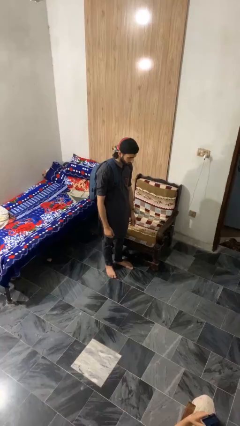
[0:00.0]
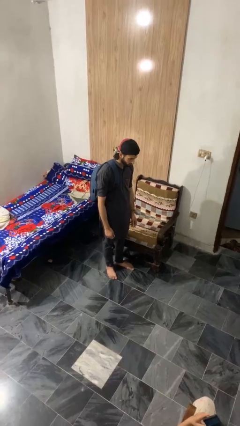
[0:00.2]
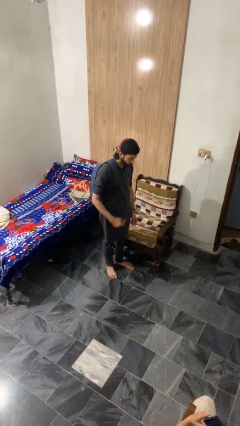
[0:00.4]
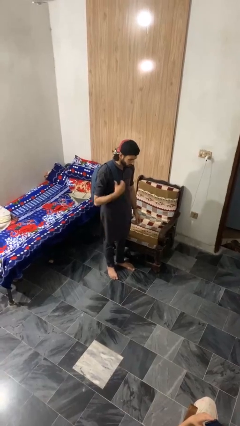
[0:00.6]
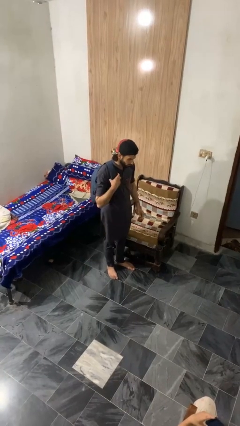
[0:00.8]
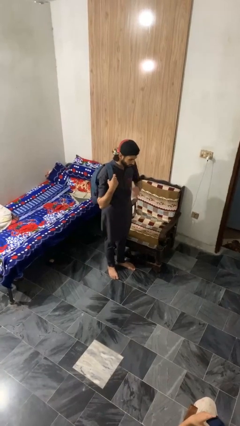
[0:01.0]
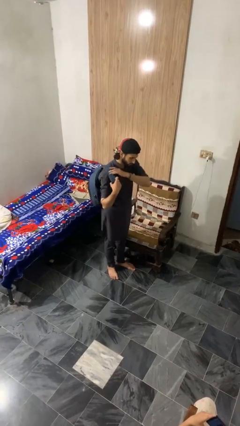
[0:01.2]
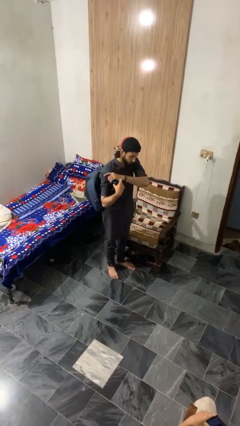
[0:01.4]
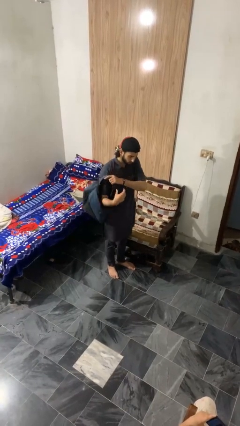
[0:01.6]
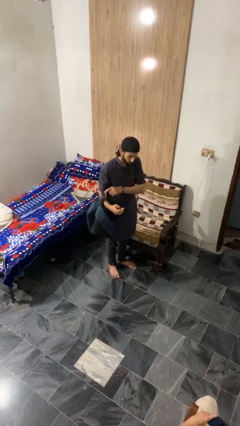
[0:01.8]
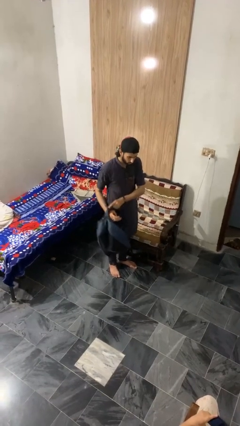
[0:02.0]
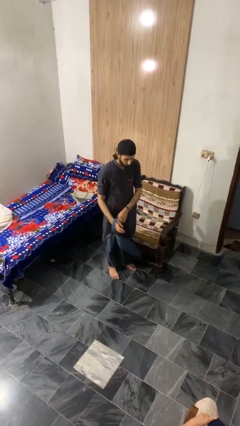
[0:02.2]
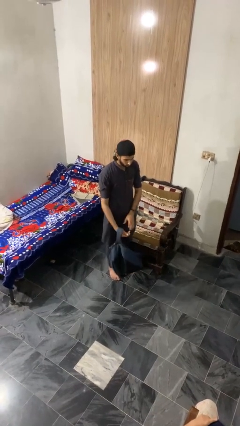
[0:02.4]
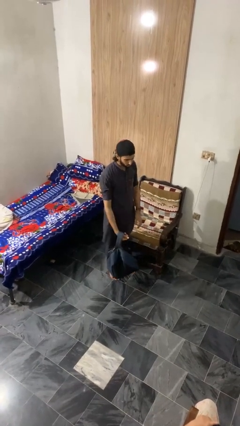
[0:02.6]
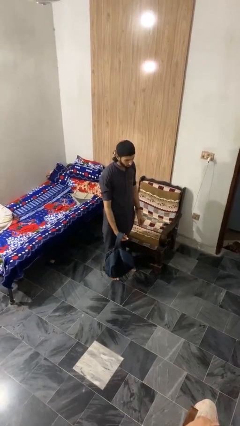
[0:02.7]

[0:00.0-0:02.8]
person takes off backpack

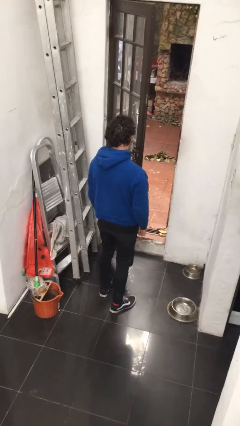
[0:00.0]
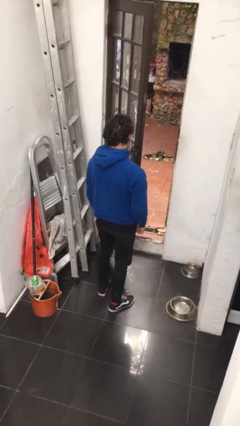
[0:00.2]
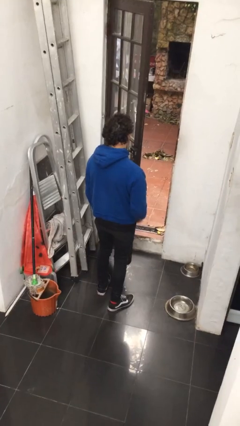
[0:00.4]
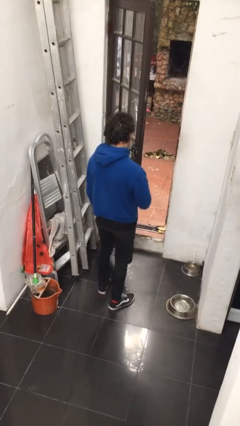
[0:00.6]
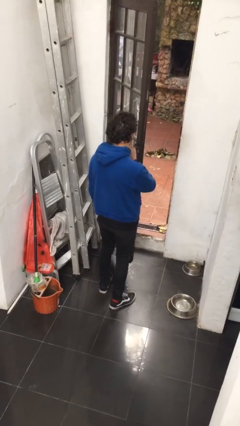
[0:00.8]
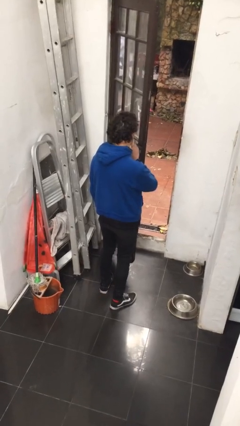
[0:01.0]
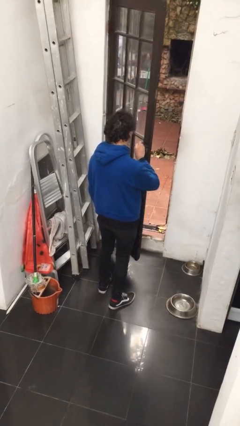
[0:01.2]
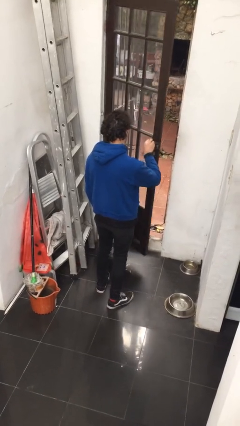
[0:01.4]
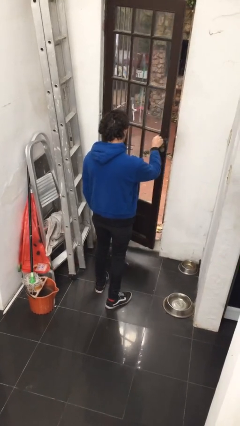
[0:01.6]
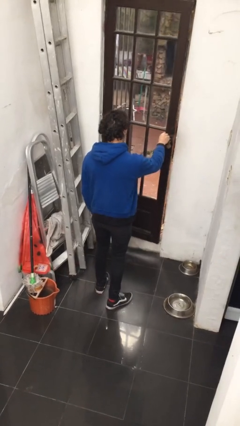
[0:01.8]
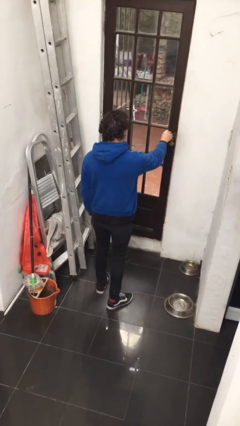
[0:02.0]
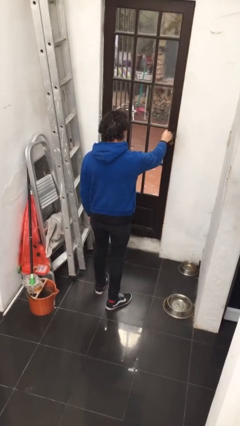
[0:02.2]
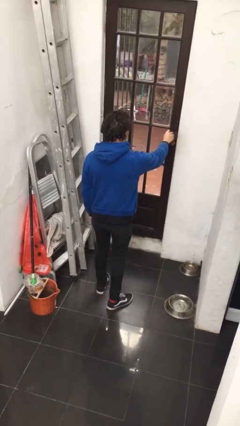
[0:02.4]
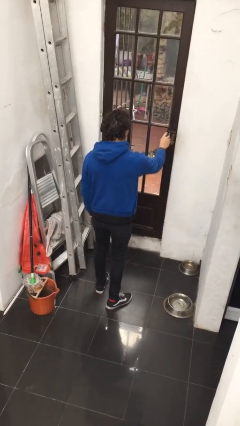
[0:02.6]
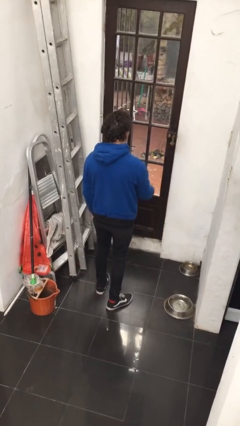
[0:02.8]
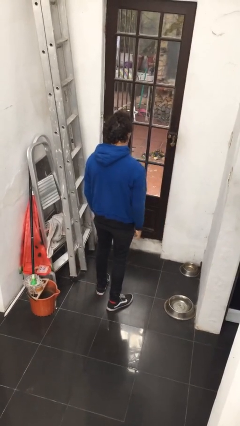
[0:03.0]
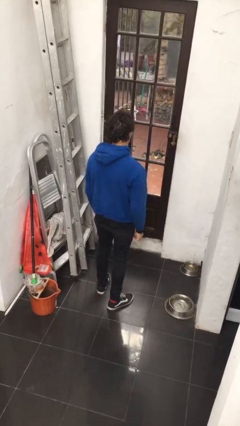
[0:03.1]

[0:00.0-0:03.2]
person closes facility door

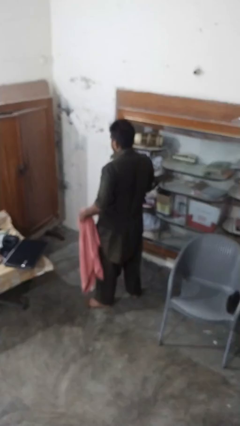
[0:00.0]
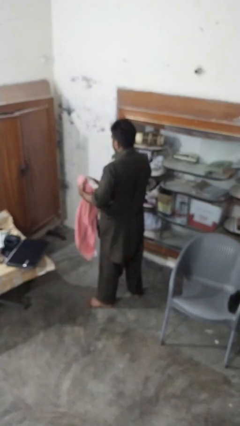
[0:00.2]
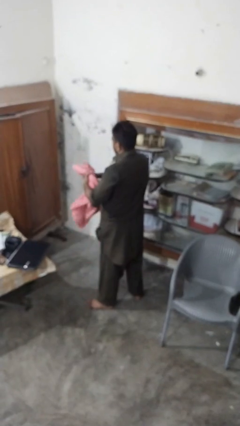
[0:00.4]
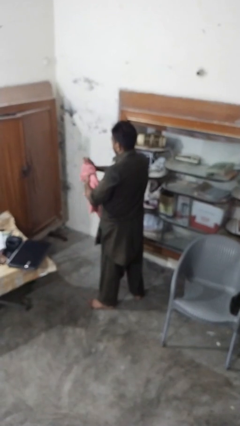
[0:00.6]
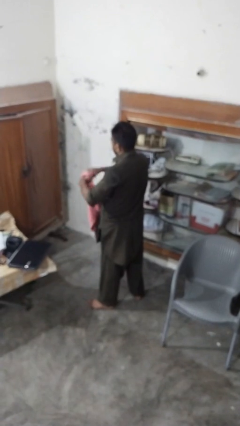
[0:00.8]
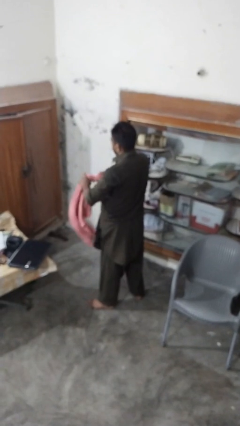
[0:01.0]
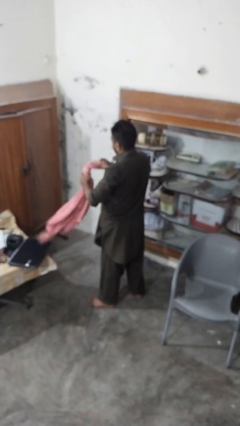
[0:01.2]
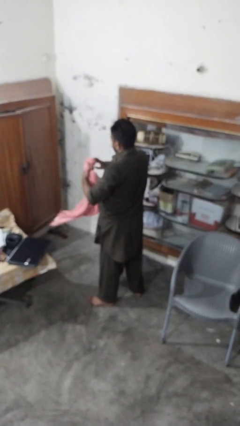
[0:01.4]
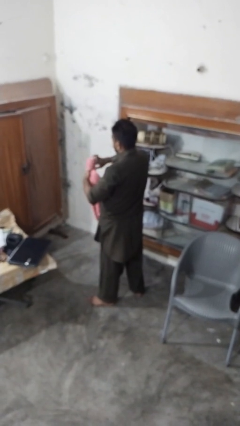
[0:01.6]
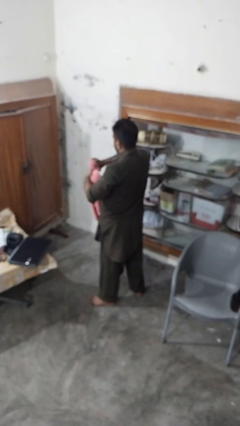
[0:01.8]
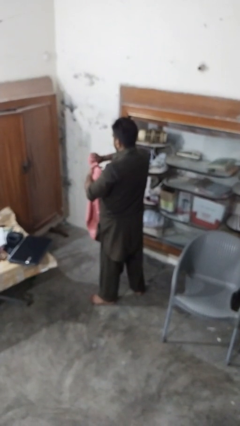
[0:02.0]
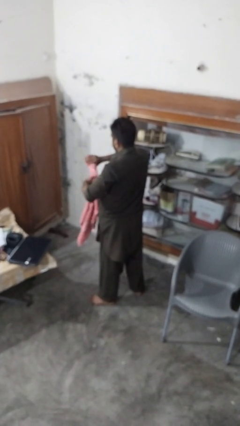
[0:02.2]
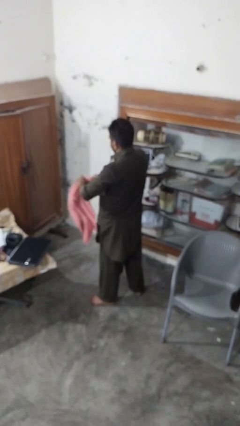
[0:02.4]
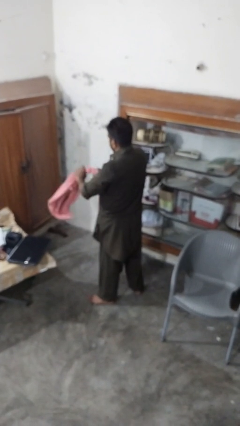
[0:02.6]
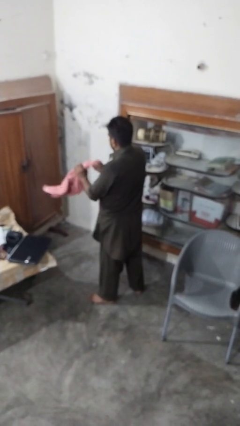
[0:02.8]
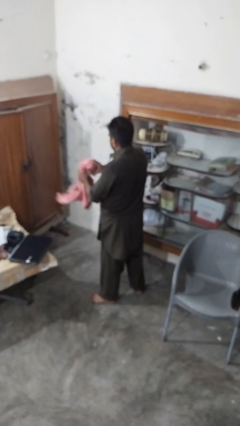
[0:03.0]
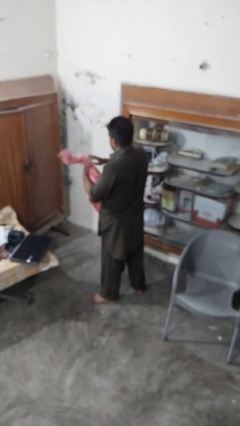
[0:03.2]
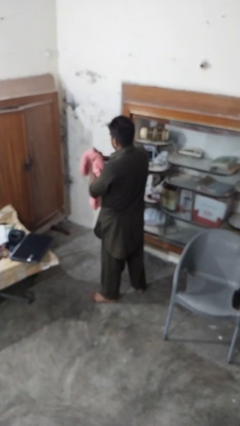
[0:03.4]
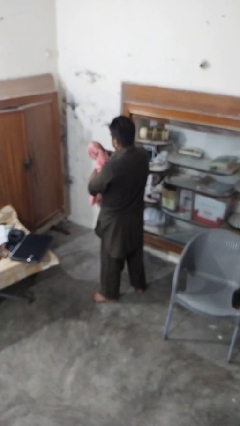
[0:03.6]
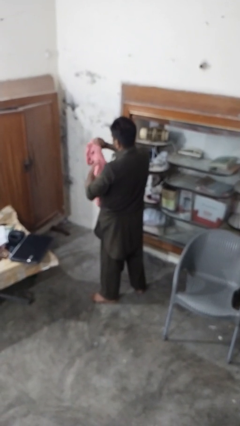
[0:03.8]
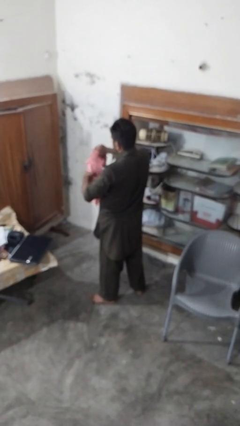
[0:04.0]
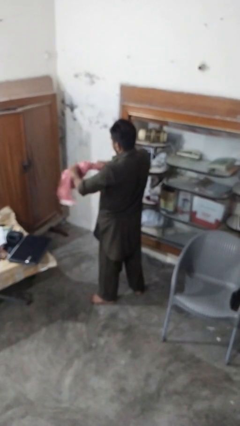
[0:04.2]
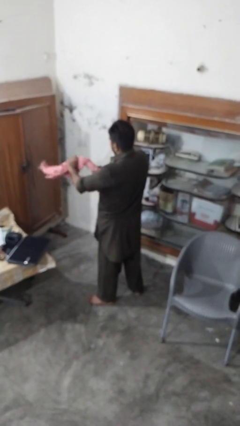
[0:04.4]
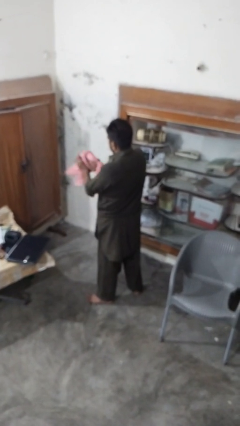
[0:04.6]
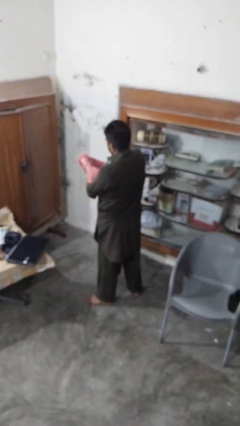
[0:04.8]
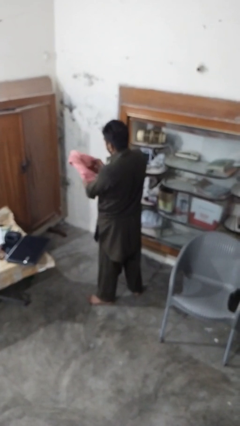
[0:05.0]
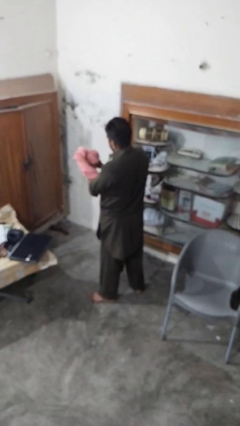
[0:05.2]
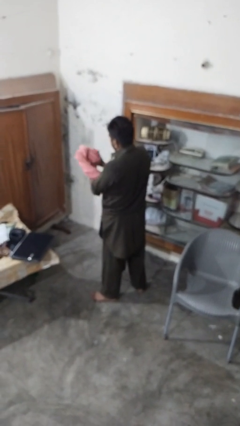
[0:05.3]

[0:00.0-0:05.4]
person squeezes object

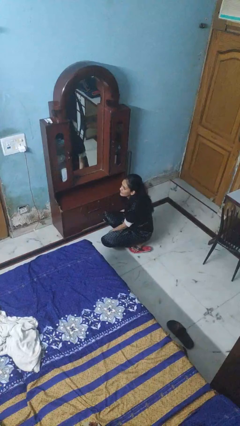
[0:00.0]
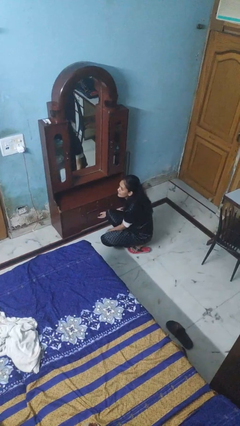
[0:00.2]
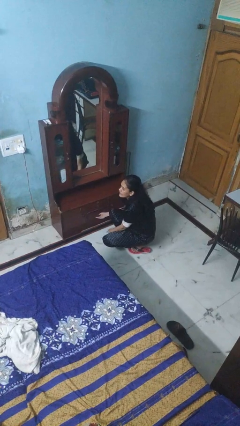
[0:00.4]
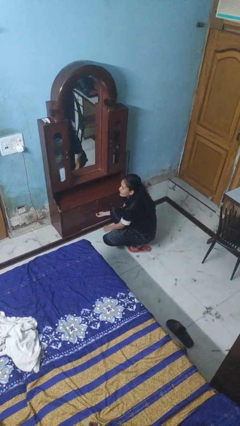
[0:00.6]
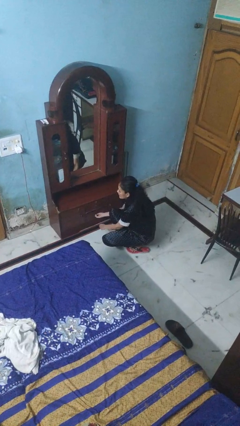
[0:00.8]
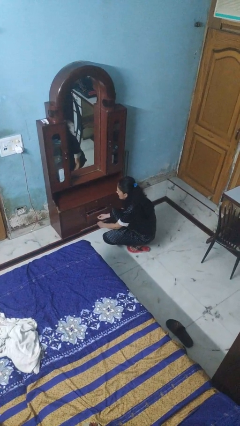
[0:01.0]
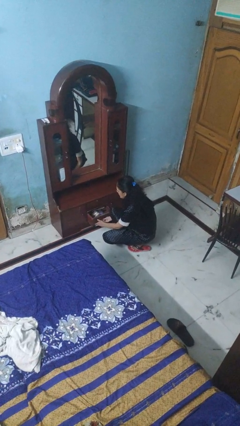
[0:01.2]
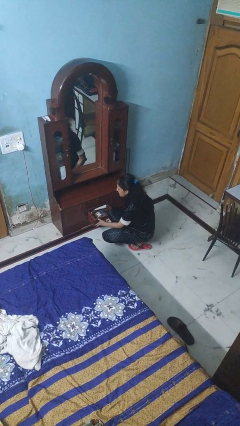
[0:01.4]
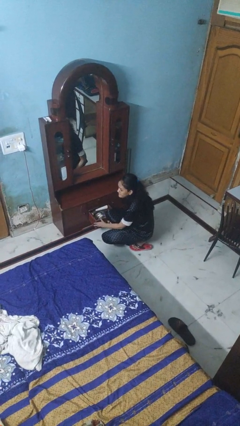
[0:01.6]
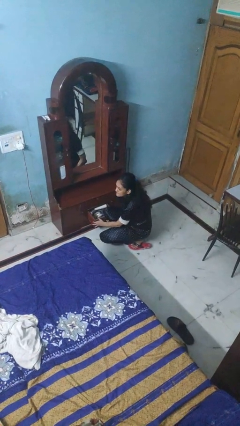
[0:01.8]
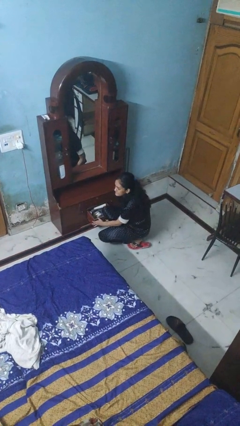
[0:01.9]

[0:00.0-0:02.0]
person opens dresser drawer

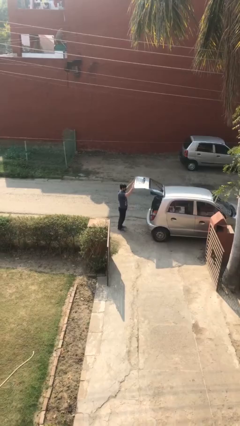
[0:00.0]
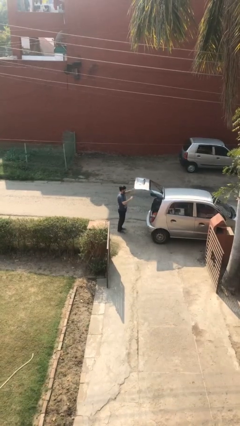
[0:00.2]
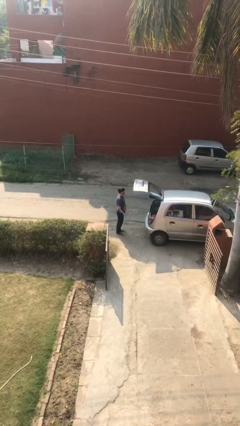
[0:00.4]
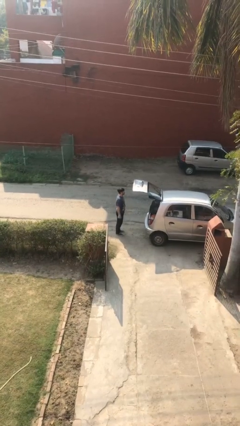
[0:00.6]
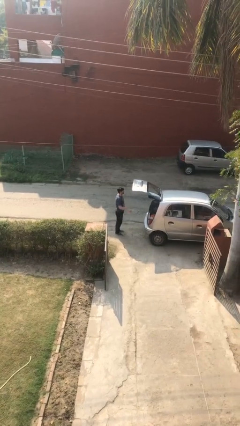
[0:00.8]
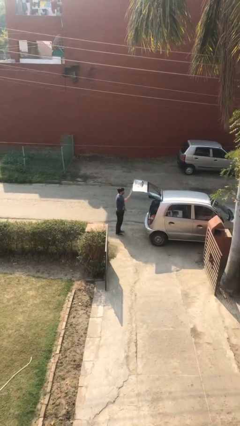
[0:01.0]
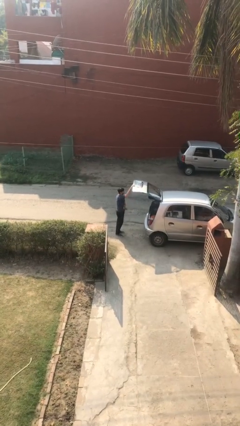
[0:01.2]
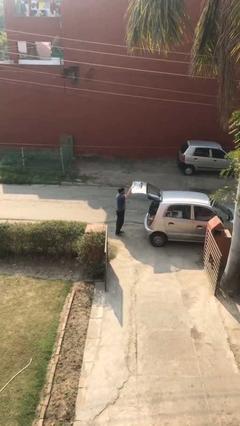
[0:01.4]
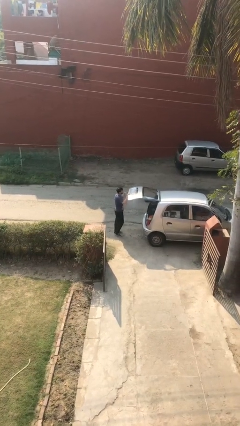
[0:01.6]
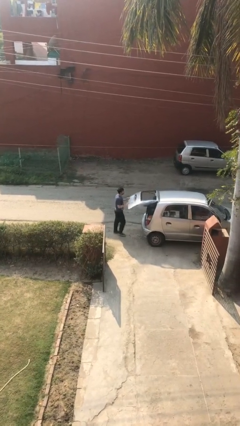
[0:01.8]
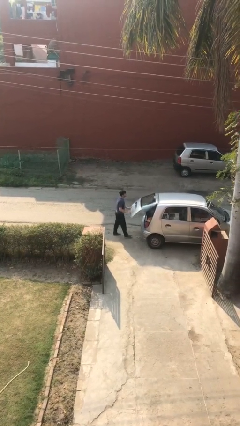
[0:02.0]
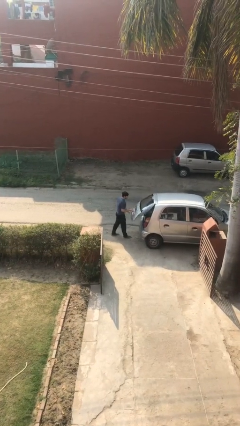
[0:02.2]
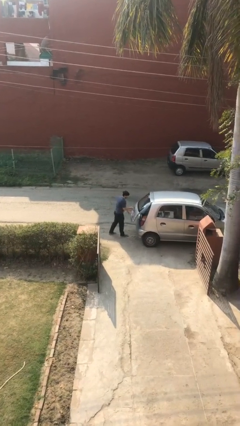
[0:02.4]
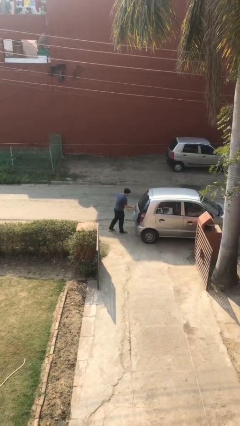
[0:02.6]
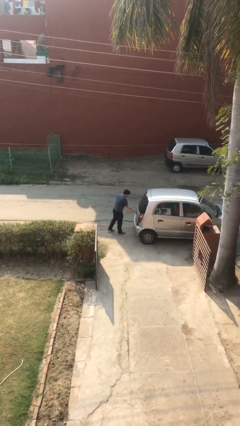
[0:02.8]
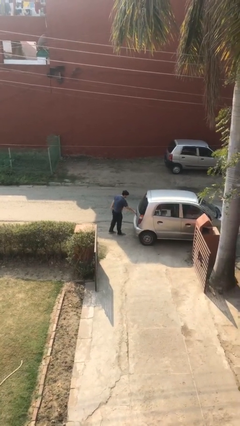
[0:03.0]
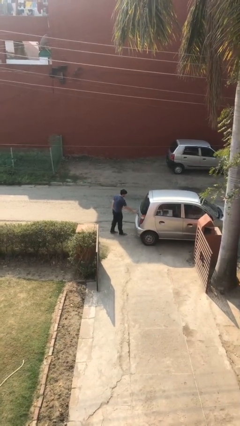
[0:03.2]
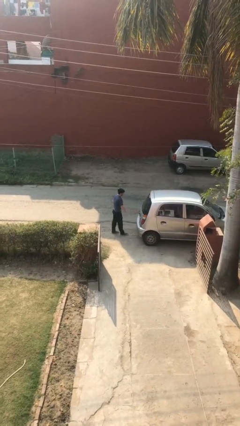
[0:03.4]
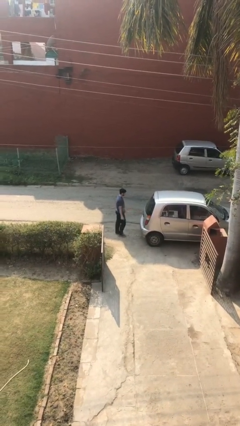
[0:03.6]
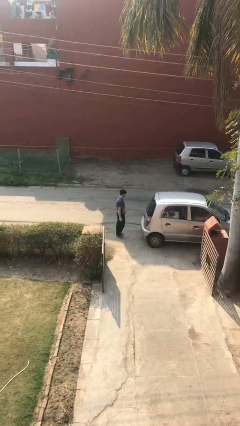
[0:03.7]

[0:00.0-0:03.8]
person closes car trunk

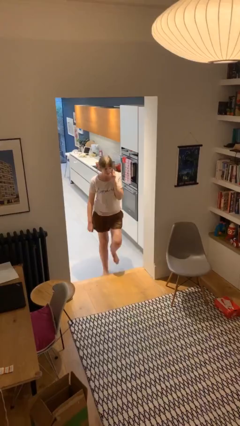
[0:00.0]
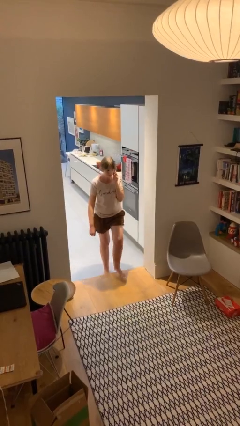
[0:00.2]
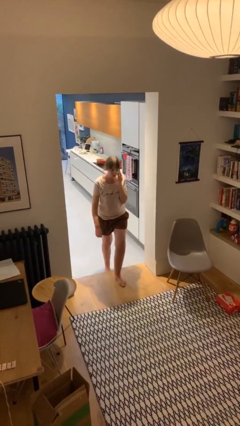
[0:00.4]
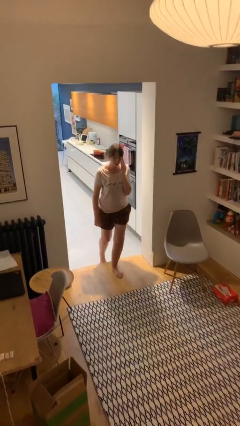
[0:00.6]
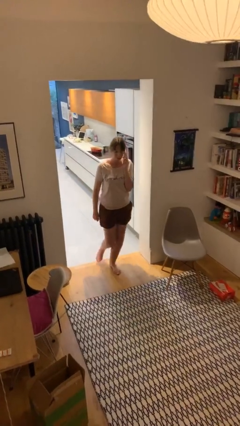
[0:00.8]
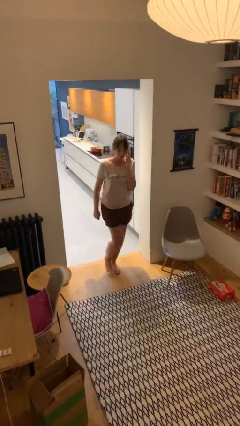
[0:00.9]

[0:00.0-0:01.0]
person enters scene through structure
